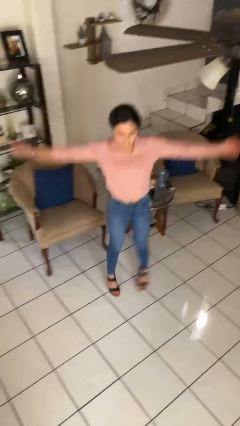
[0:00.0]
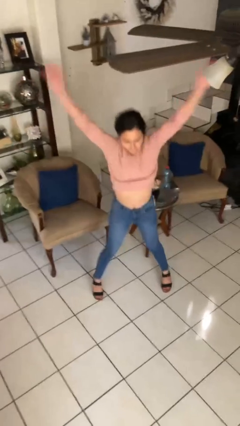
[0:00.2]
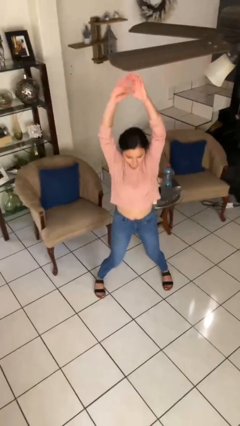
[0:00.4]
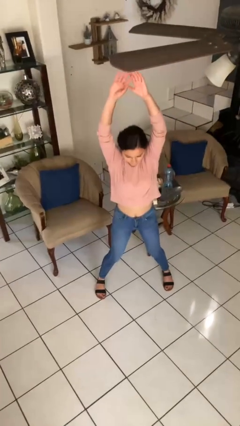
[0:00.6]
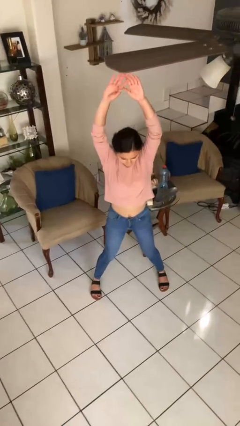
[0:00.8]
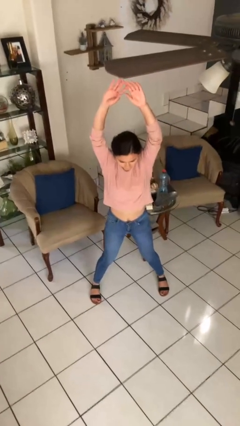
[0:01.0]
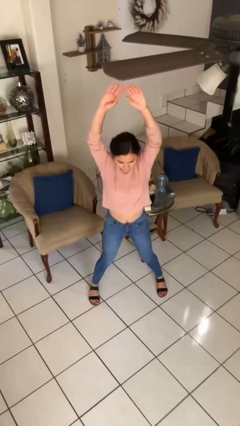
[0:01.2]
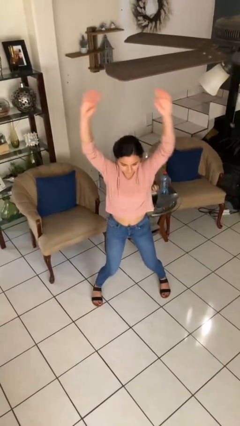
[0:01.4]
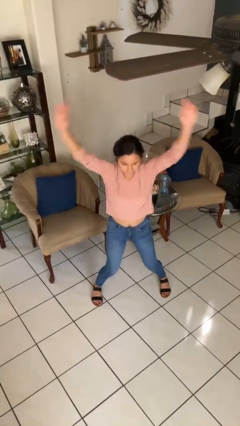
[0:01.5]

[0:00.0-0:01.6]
person exercises with jumping jacks

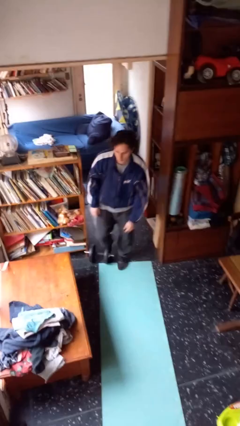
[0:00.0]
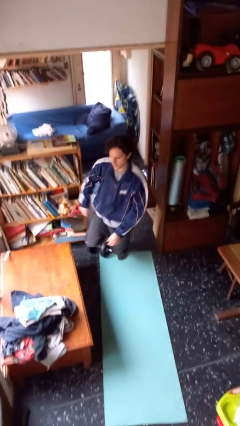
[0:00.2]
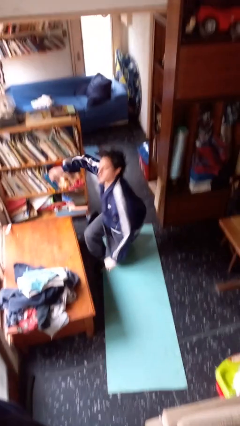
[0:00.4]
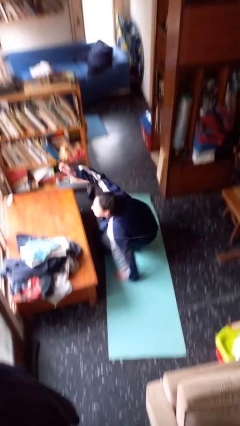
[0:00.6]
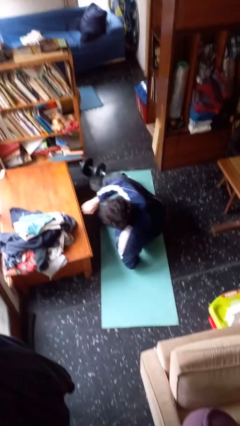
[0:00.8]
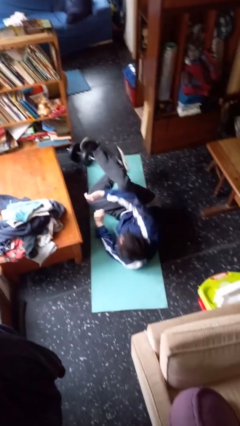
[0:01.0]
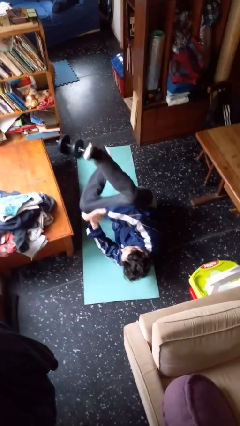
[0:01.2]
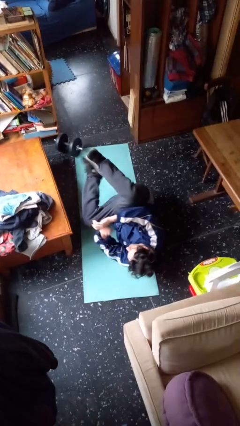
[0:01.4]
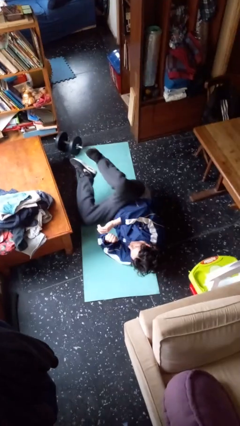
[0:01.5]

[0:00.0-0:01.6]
person trips on object on floor

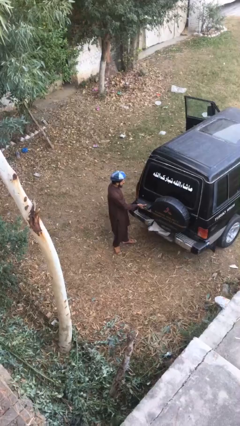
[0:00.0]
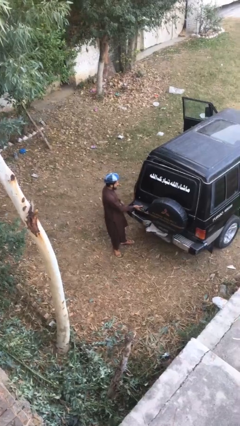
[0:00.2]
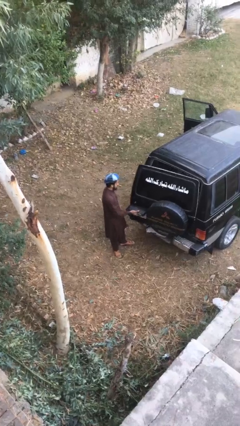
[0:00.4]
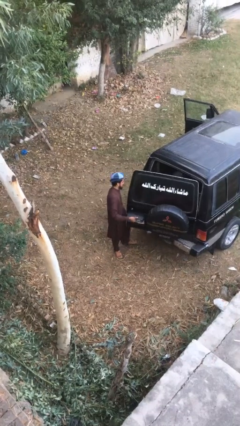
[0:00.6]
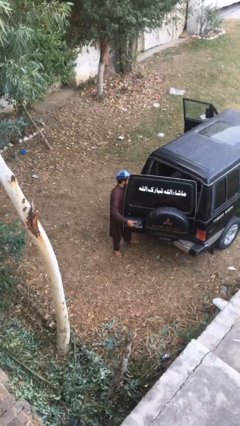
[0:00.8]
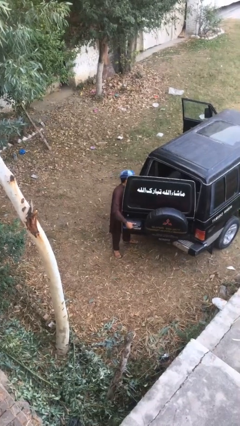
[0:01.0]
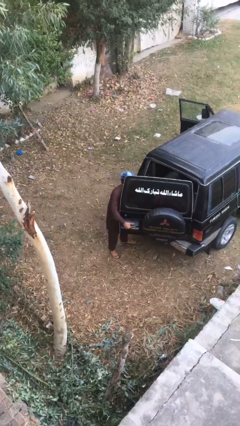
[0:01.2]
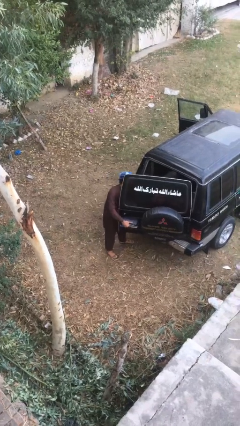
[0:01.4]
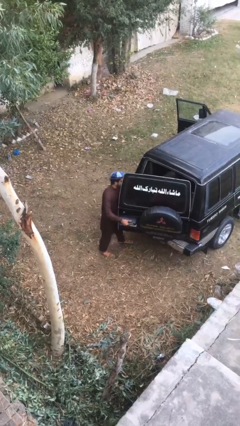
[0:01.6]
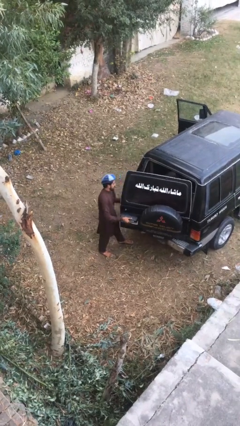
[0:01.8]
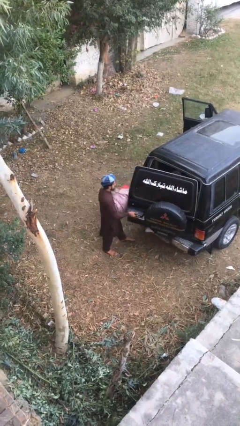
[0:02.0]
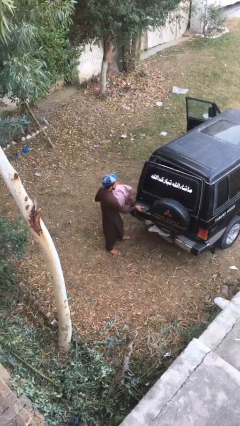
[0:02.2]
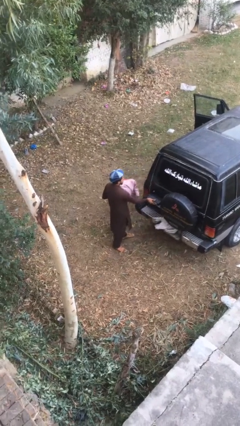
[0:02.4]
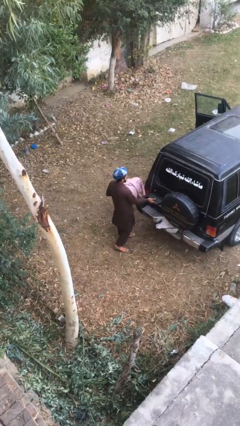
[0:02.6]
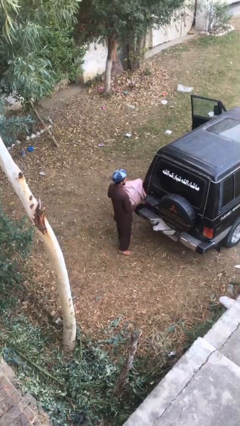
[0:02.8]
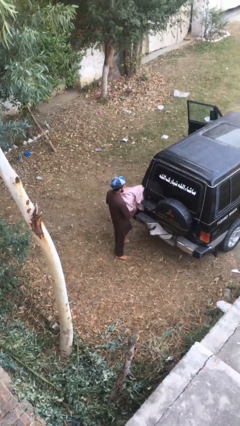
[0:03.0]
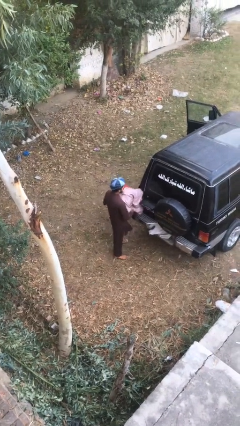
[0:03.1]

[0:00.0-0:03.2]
person unloads car

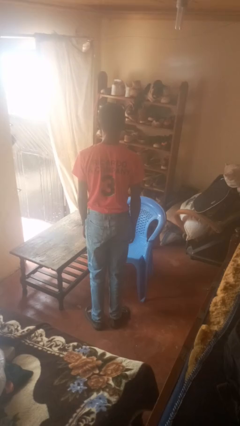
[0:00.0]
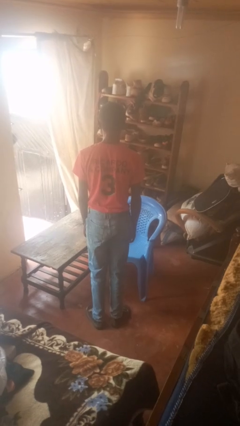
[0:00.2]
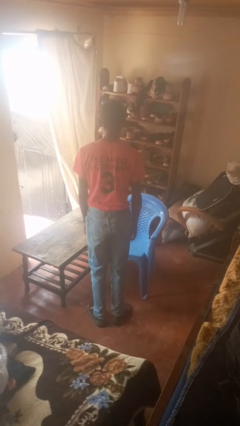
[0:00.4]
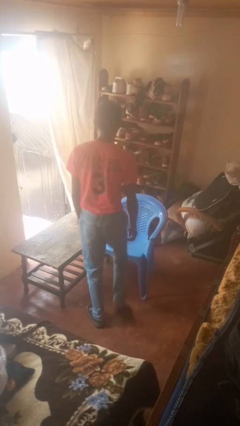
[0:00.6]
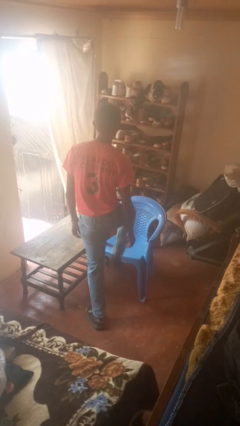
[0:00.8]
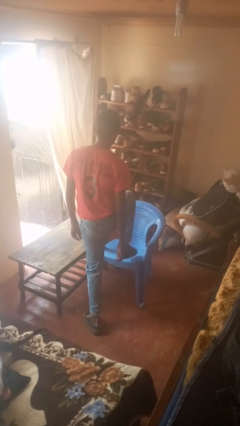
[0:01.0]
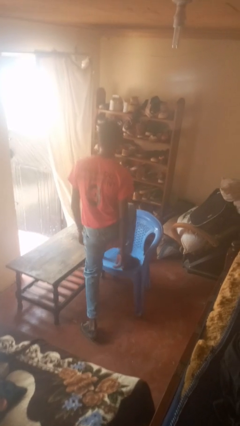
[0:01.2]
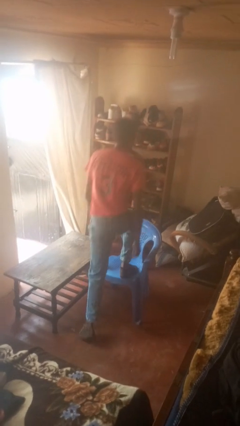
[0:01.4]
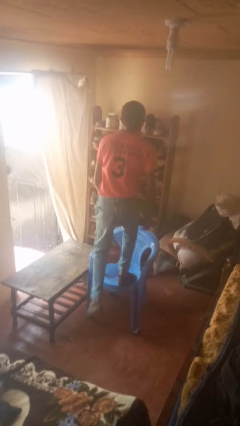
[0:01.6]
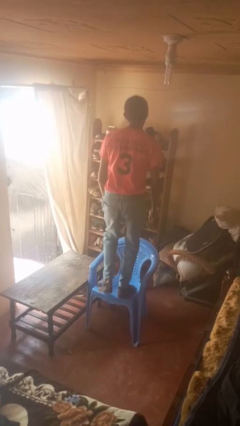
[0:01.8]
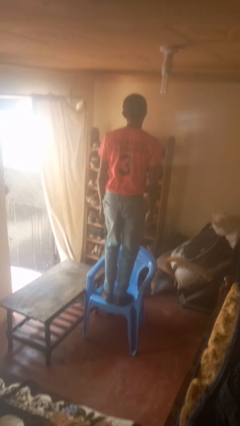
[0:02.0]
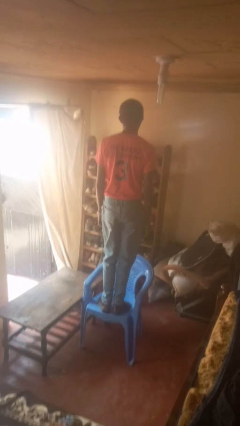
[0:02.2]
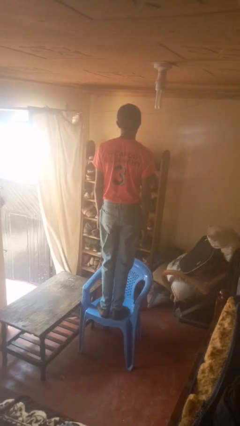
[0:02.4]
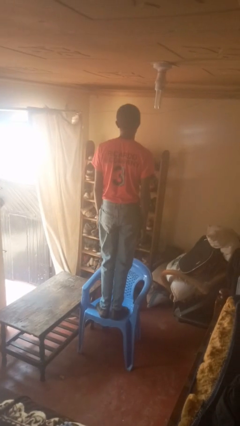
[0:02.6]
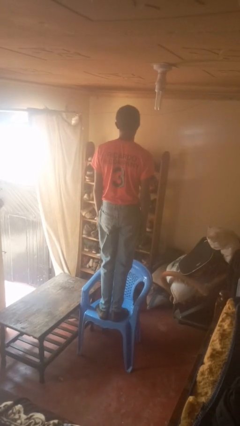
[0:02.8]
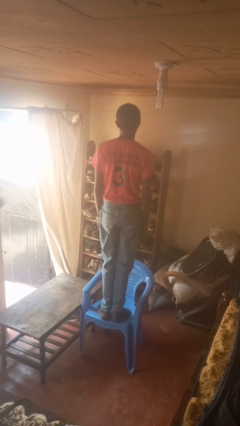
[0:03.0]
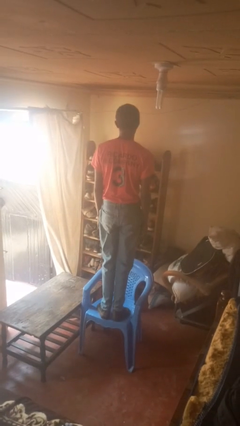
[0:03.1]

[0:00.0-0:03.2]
person climbs on chair

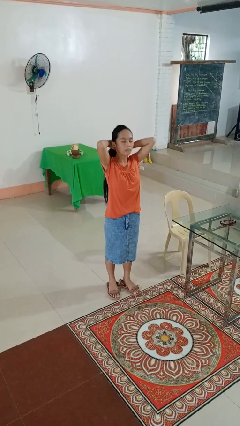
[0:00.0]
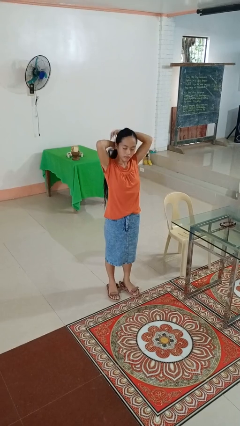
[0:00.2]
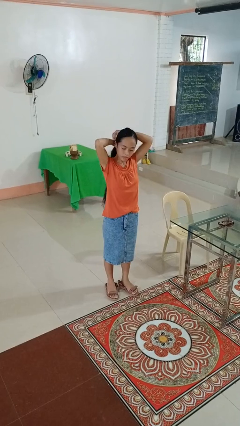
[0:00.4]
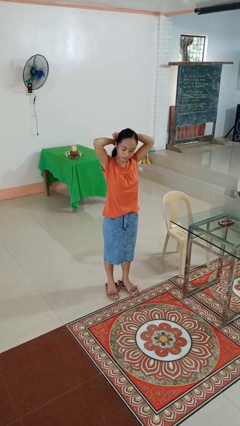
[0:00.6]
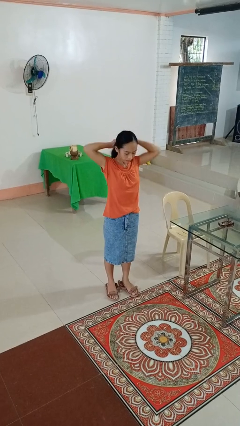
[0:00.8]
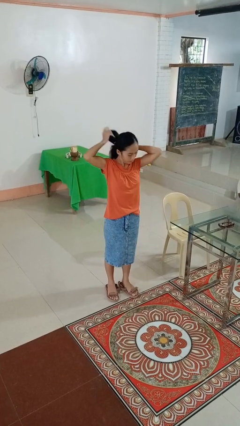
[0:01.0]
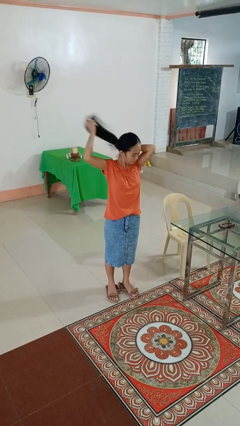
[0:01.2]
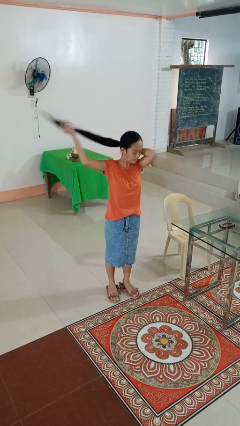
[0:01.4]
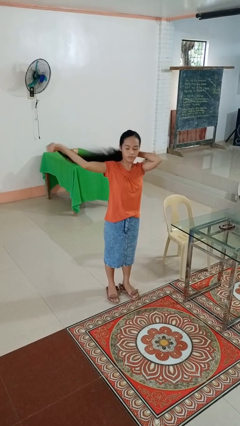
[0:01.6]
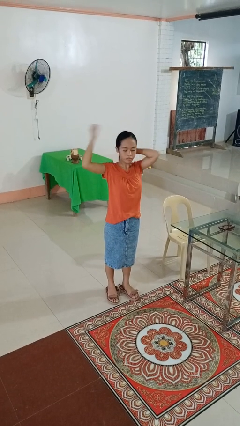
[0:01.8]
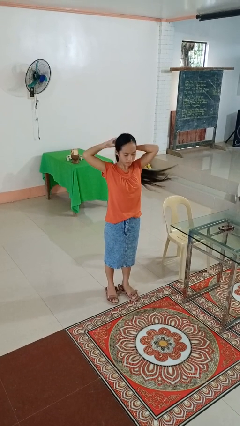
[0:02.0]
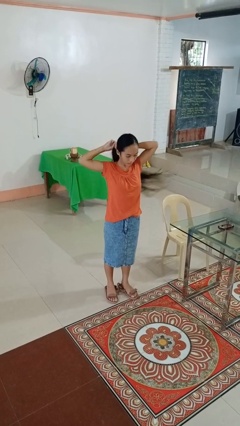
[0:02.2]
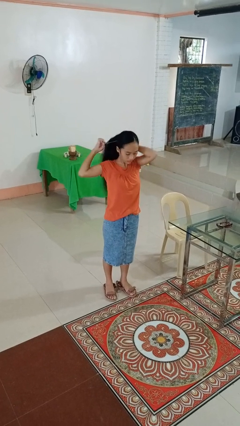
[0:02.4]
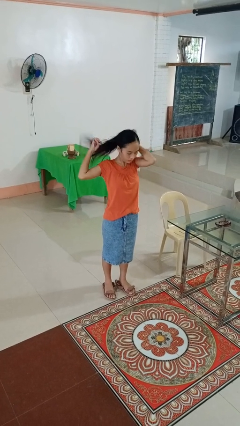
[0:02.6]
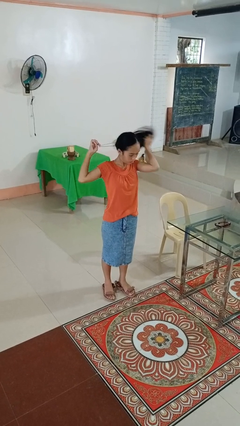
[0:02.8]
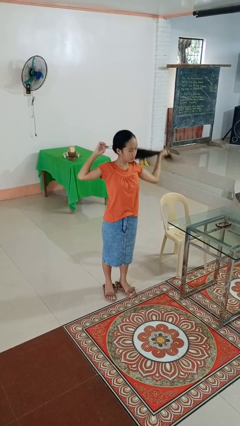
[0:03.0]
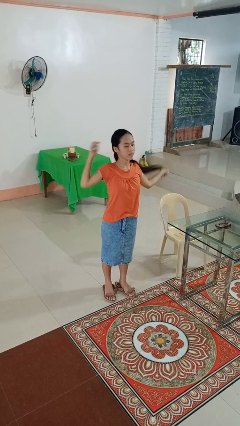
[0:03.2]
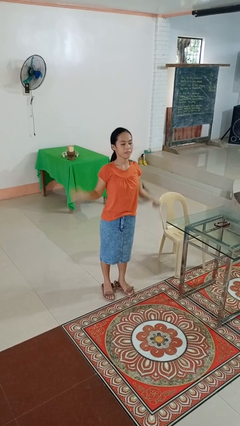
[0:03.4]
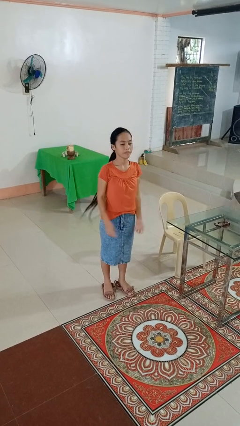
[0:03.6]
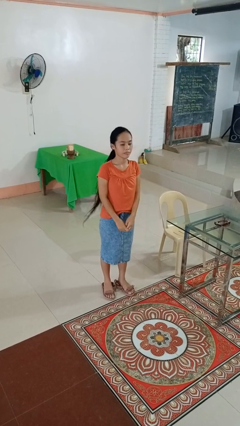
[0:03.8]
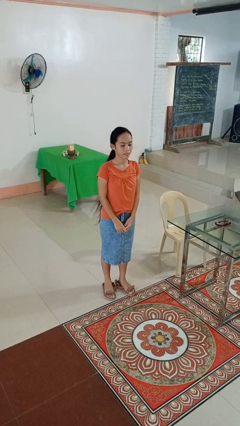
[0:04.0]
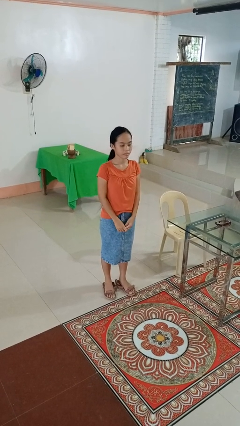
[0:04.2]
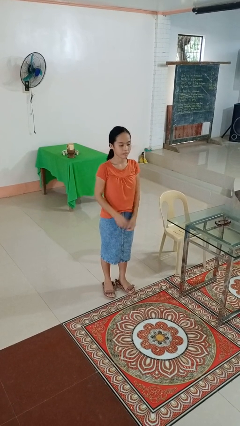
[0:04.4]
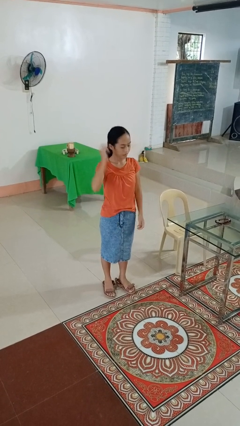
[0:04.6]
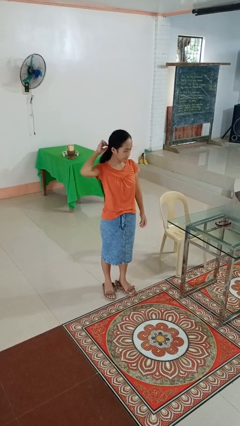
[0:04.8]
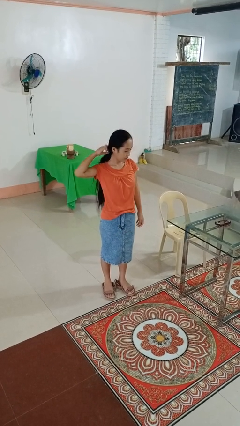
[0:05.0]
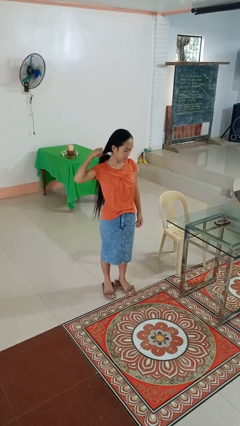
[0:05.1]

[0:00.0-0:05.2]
person puts hair in ponytail

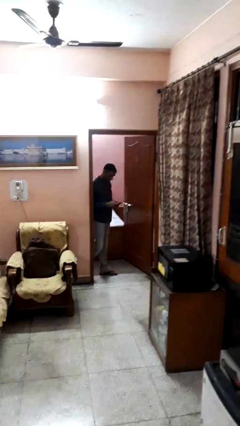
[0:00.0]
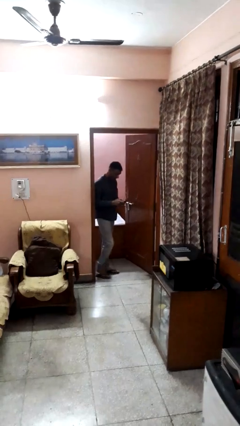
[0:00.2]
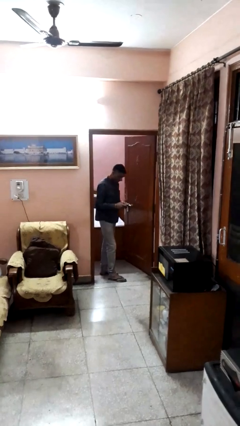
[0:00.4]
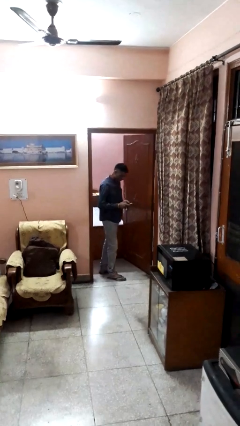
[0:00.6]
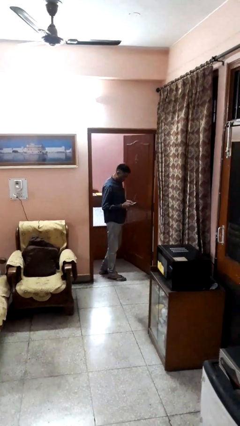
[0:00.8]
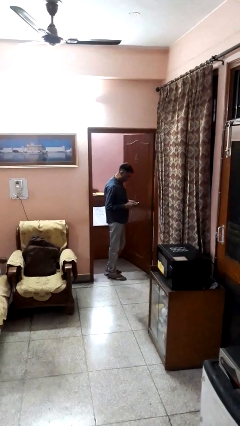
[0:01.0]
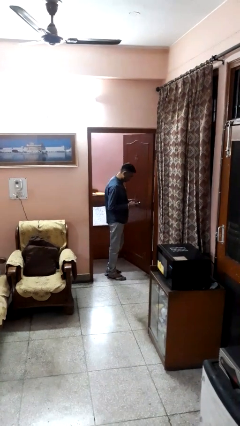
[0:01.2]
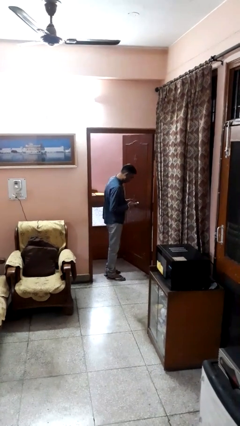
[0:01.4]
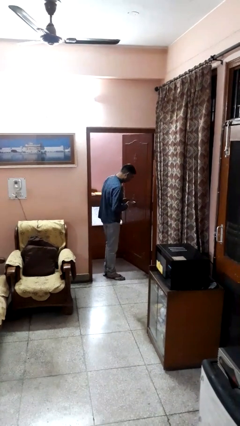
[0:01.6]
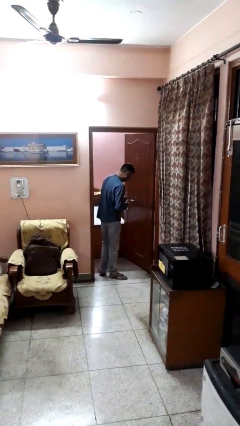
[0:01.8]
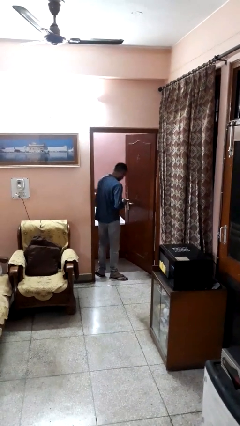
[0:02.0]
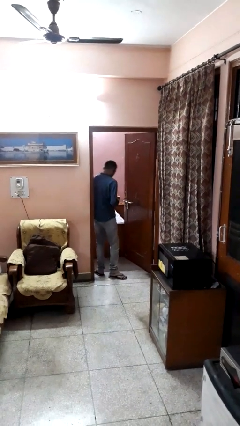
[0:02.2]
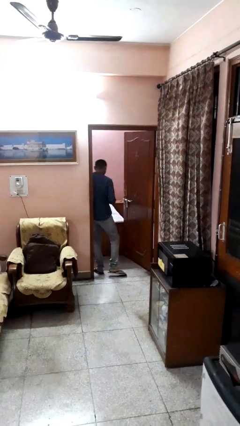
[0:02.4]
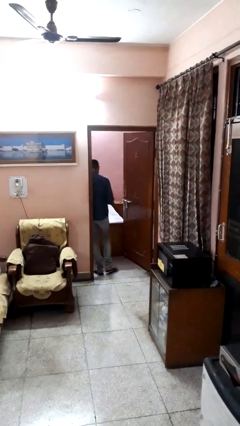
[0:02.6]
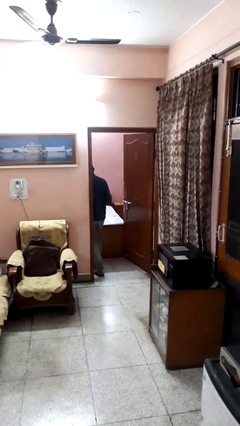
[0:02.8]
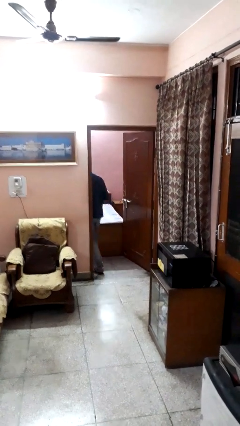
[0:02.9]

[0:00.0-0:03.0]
person enters scene through structure
